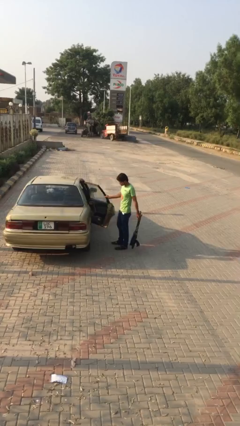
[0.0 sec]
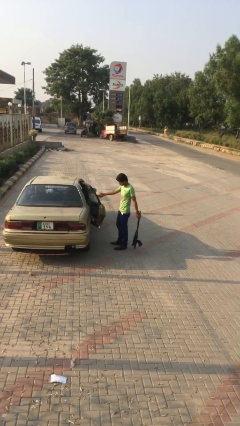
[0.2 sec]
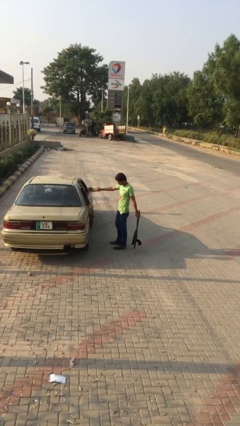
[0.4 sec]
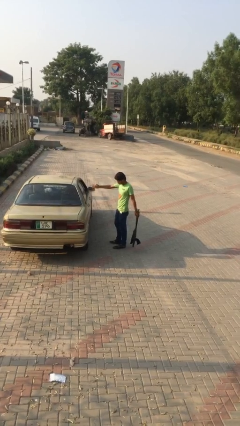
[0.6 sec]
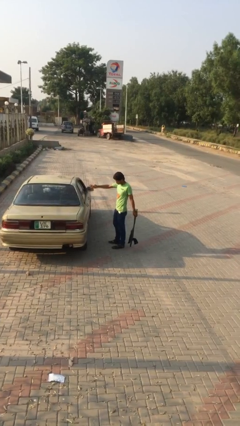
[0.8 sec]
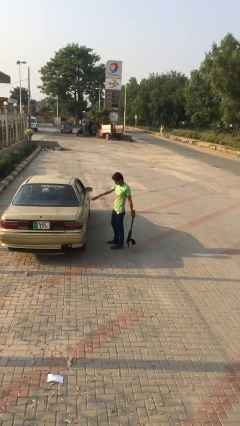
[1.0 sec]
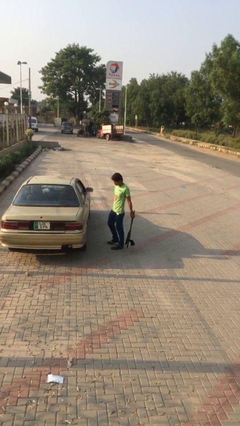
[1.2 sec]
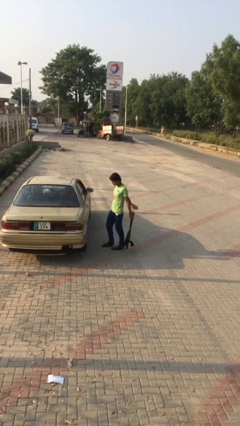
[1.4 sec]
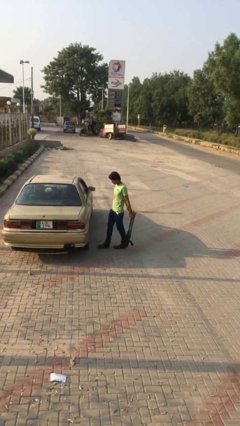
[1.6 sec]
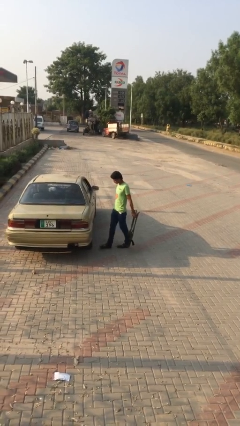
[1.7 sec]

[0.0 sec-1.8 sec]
person closes car door

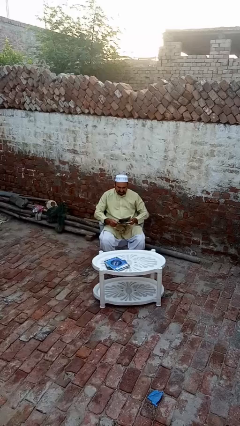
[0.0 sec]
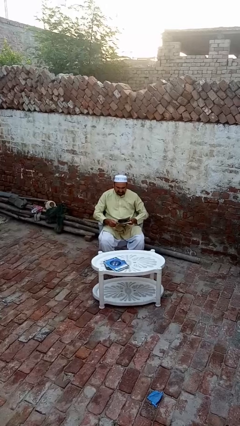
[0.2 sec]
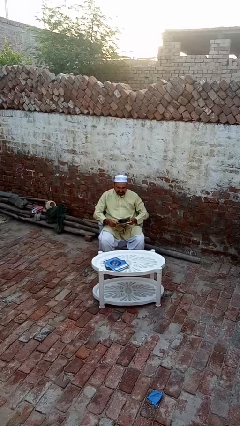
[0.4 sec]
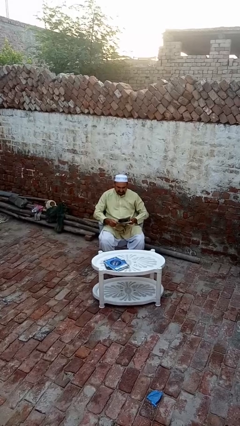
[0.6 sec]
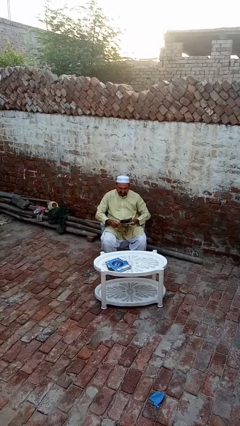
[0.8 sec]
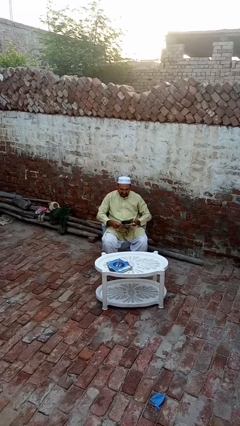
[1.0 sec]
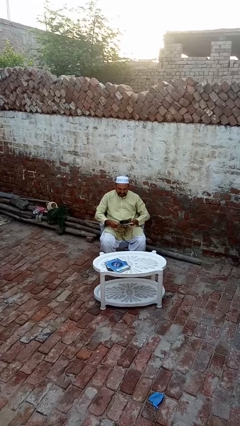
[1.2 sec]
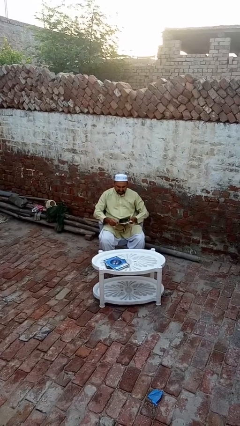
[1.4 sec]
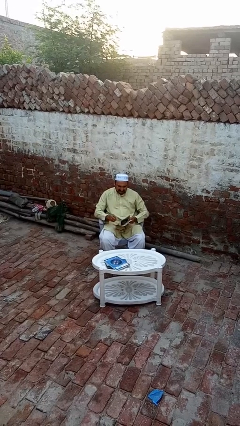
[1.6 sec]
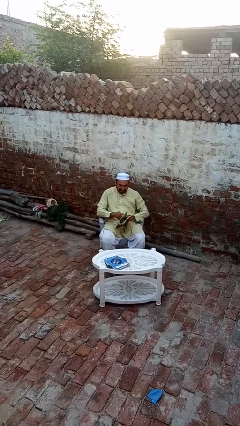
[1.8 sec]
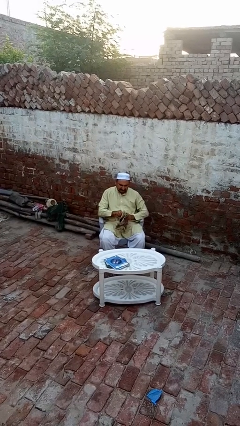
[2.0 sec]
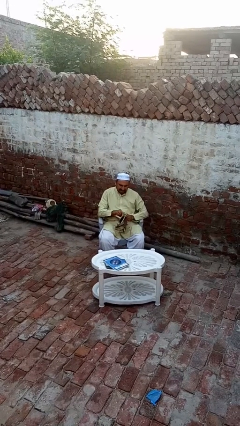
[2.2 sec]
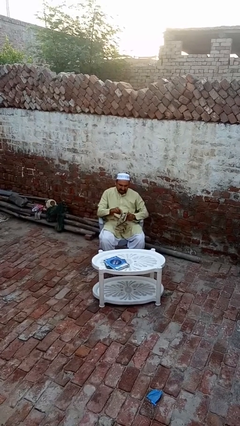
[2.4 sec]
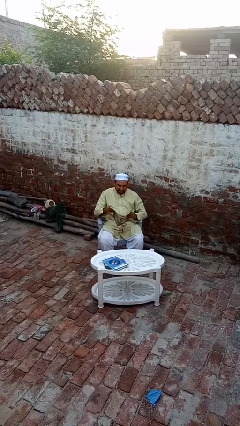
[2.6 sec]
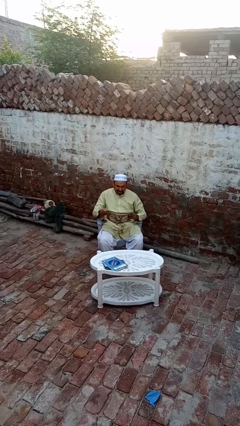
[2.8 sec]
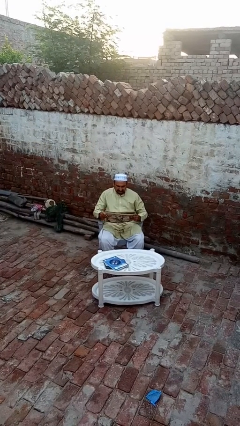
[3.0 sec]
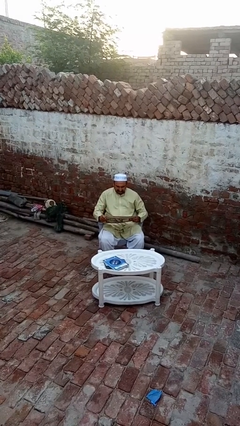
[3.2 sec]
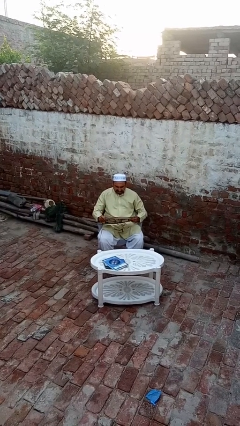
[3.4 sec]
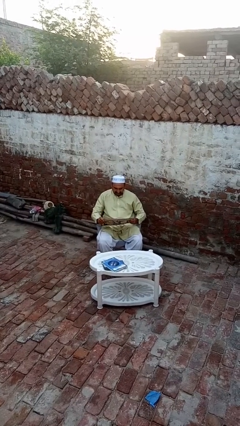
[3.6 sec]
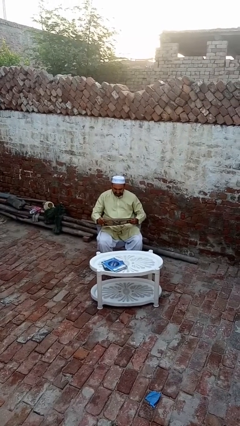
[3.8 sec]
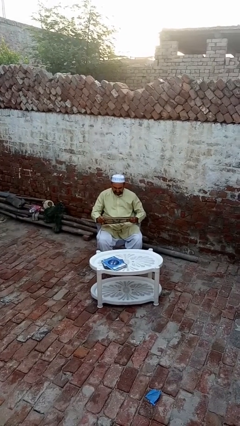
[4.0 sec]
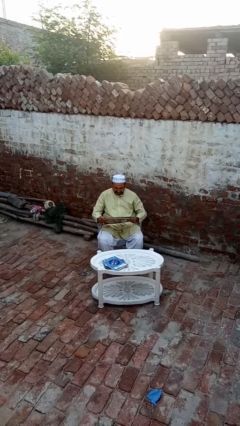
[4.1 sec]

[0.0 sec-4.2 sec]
person reads magazine

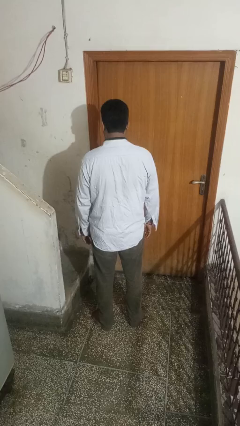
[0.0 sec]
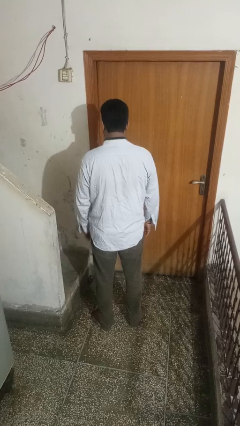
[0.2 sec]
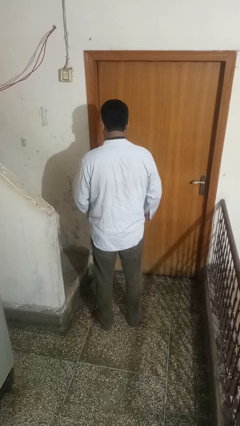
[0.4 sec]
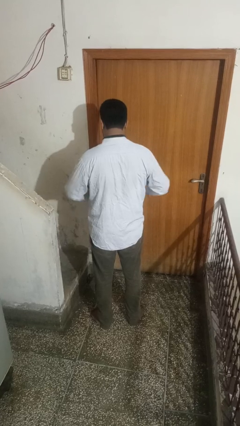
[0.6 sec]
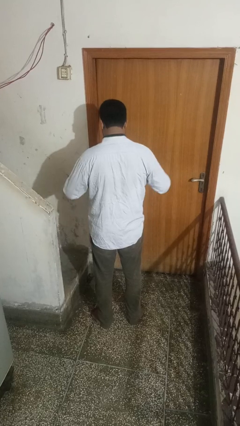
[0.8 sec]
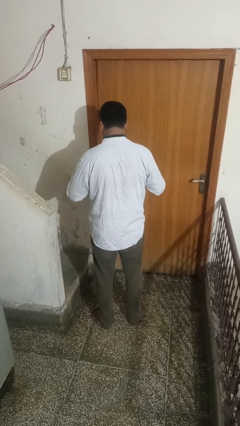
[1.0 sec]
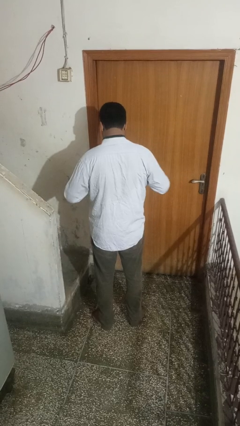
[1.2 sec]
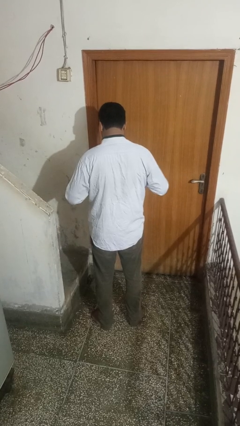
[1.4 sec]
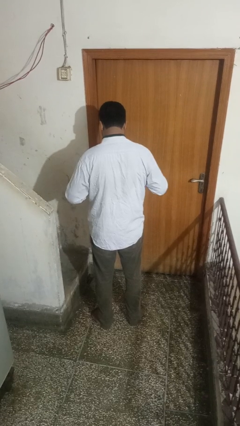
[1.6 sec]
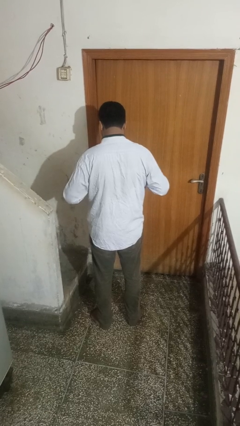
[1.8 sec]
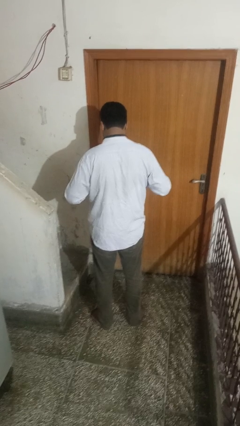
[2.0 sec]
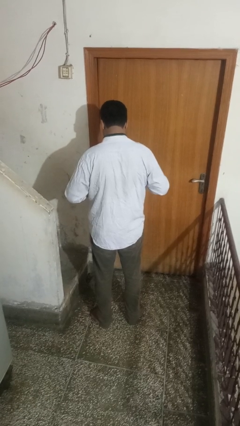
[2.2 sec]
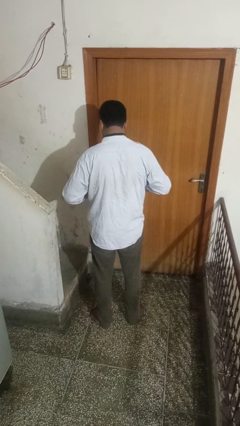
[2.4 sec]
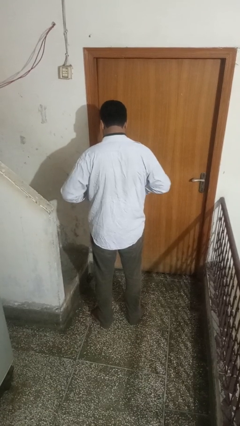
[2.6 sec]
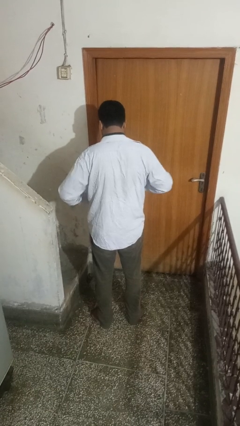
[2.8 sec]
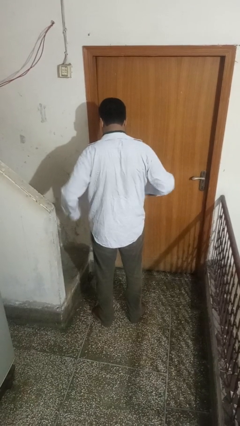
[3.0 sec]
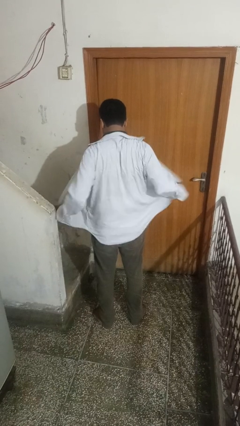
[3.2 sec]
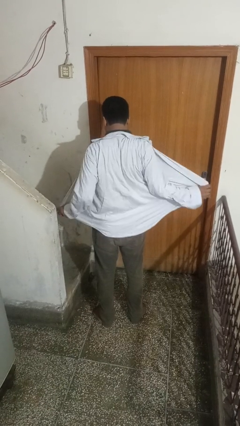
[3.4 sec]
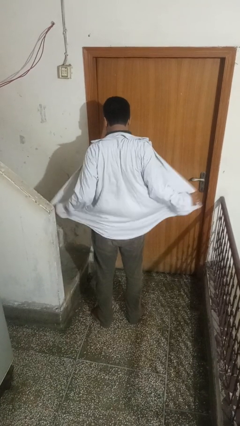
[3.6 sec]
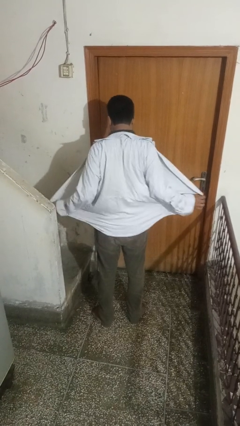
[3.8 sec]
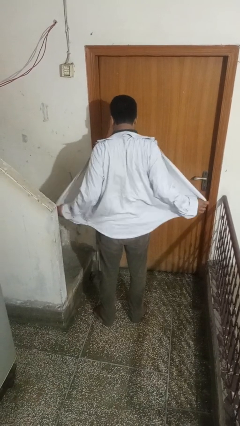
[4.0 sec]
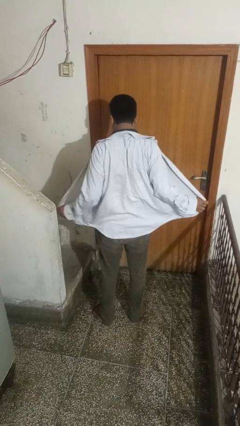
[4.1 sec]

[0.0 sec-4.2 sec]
person unbuttons shirt

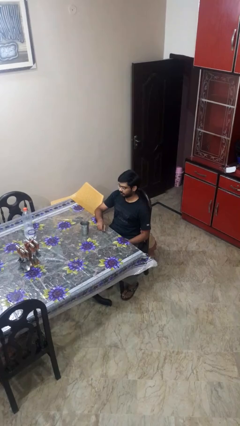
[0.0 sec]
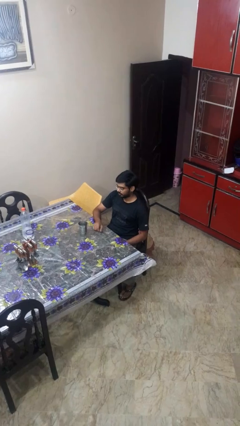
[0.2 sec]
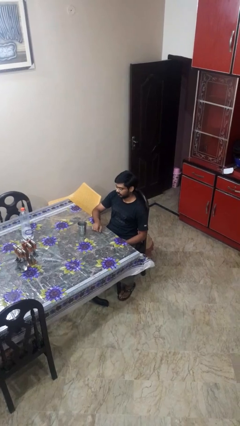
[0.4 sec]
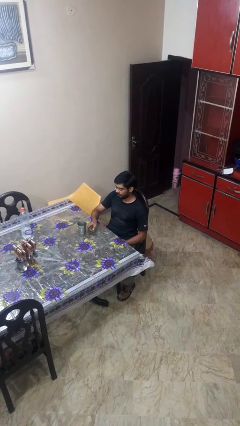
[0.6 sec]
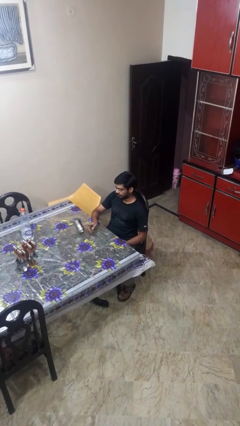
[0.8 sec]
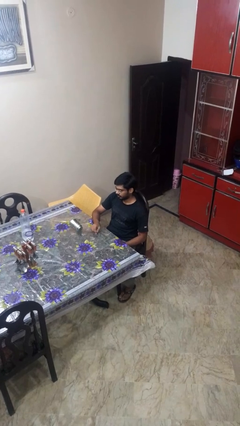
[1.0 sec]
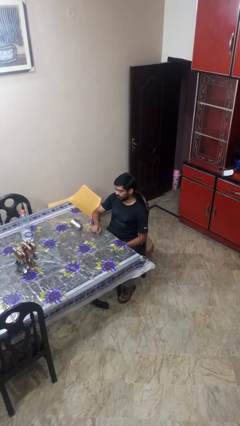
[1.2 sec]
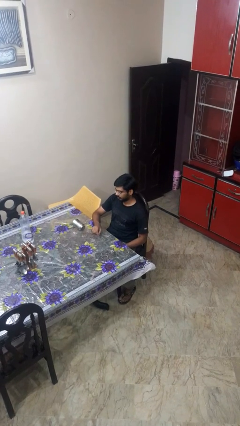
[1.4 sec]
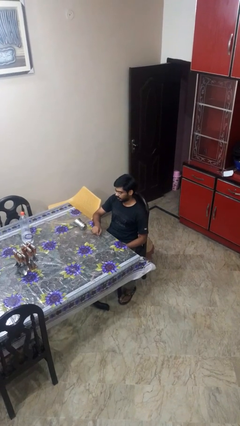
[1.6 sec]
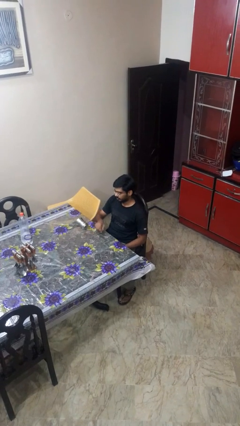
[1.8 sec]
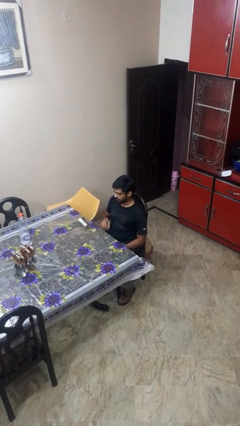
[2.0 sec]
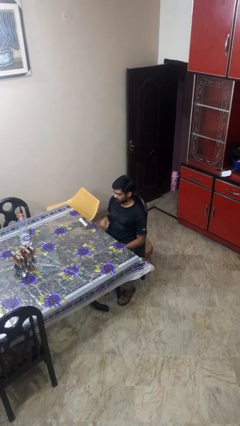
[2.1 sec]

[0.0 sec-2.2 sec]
person knocks over glass

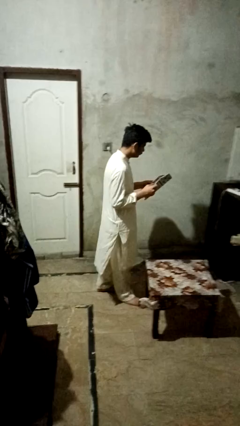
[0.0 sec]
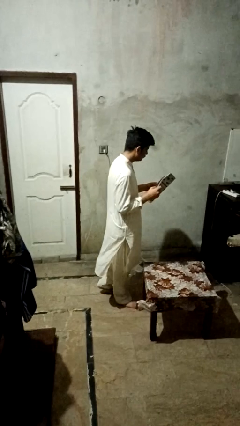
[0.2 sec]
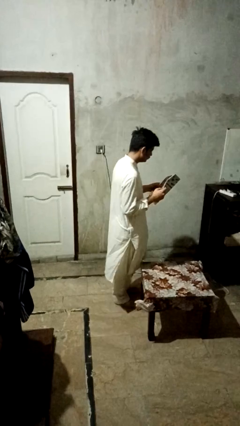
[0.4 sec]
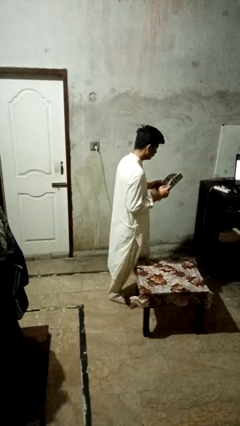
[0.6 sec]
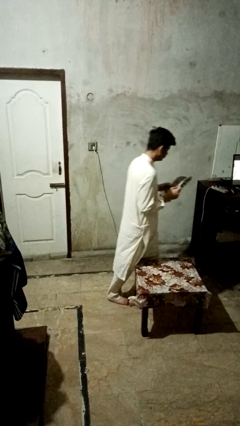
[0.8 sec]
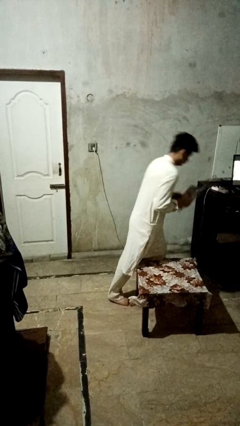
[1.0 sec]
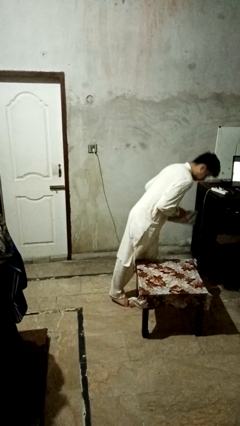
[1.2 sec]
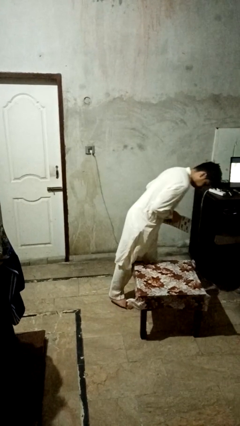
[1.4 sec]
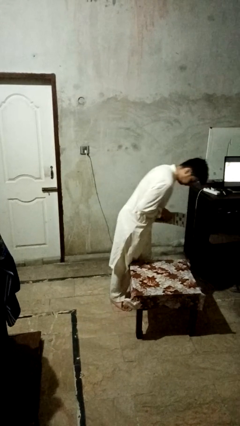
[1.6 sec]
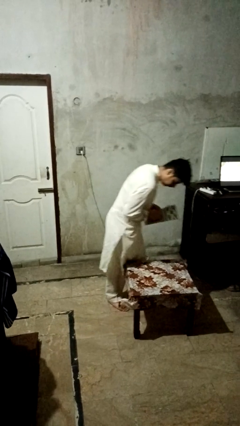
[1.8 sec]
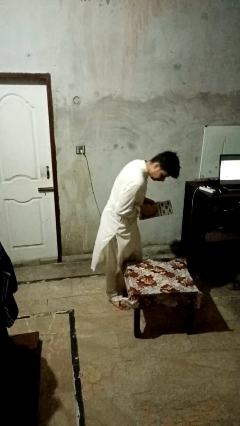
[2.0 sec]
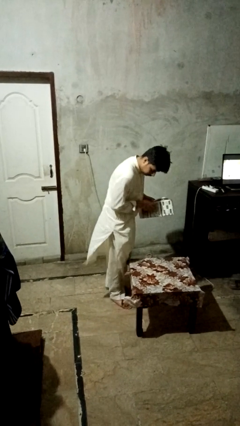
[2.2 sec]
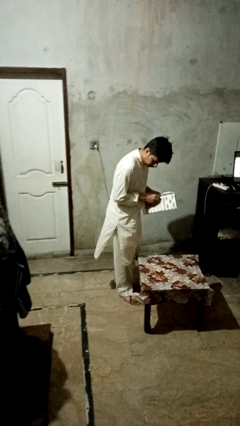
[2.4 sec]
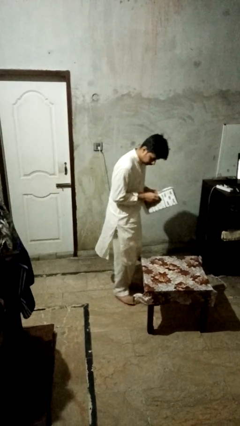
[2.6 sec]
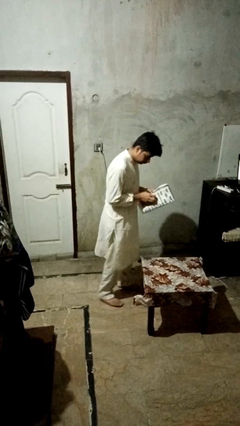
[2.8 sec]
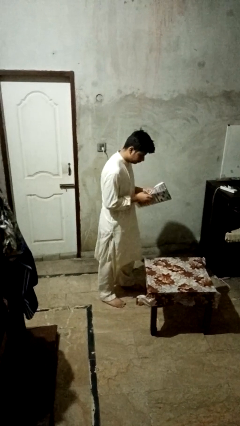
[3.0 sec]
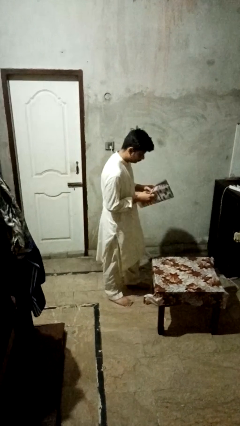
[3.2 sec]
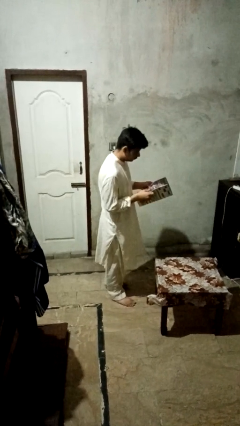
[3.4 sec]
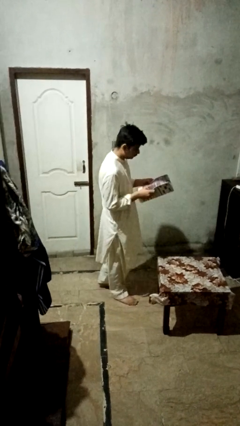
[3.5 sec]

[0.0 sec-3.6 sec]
person bumps into table

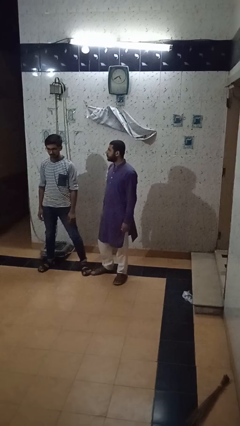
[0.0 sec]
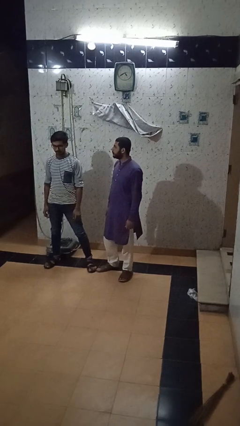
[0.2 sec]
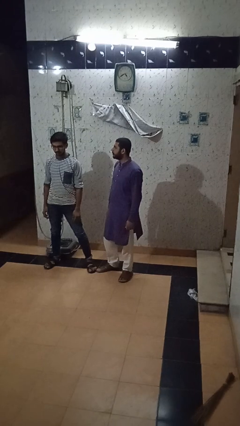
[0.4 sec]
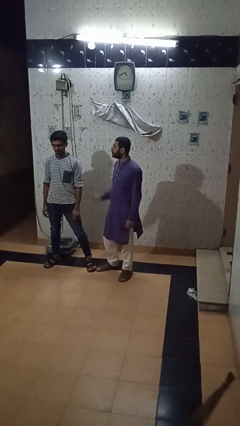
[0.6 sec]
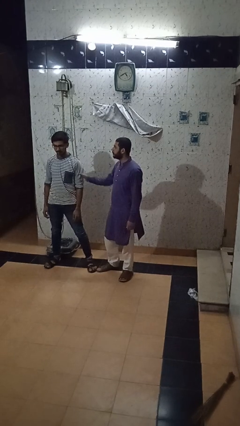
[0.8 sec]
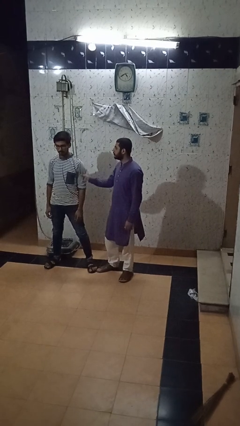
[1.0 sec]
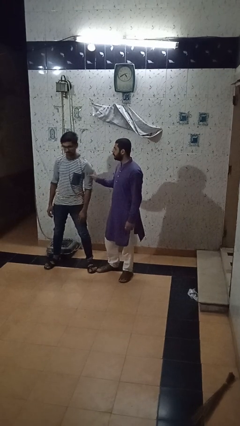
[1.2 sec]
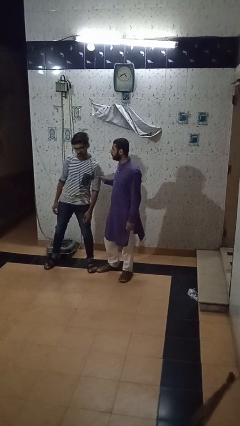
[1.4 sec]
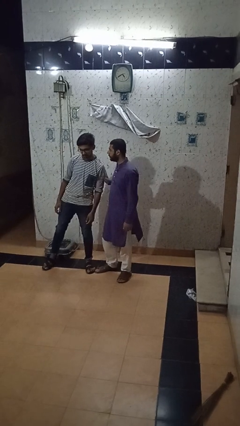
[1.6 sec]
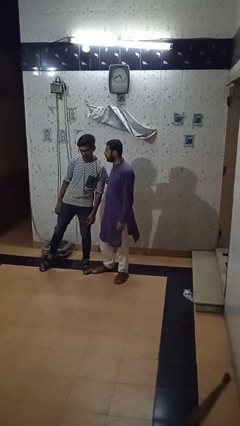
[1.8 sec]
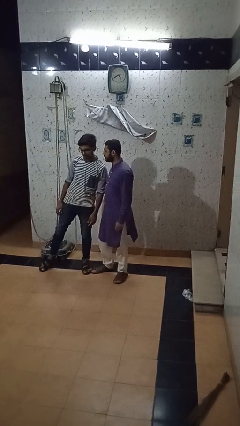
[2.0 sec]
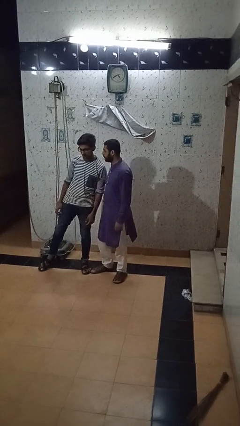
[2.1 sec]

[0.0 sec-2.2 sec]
person grabs person by bicep
